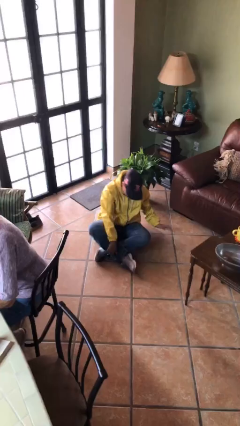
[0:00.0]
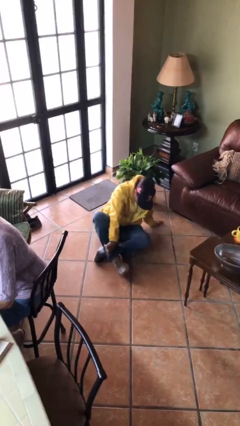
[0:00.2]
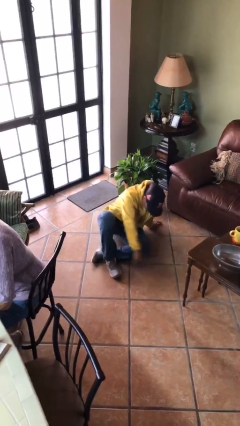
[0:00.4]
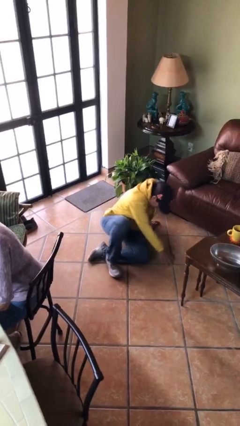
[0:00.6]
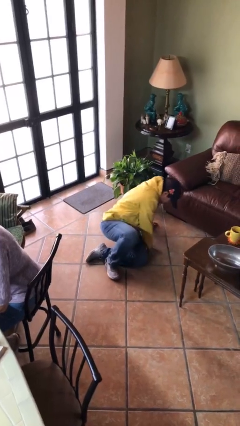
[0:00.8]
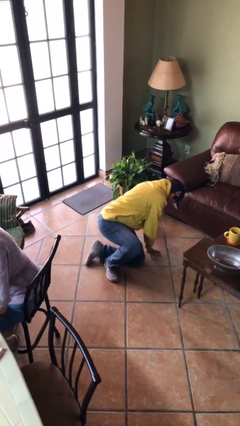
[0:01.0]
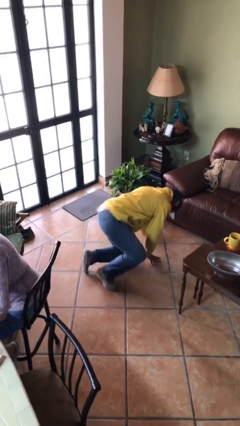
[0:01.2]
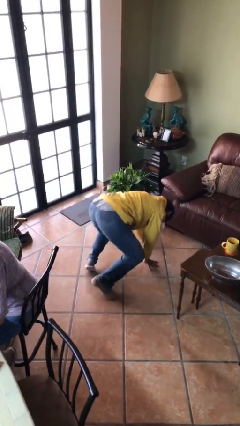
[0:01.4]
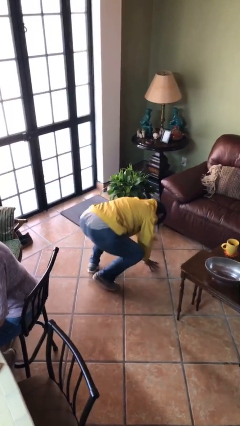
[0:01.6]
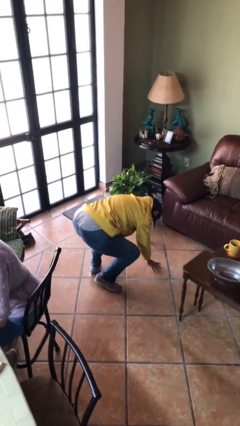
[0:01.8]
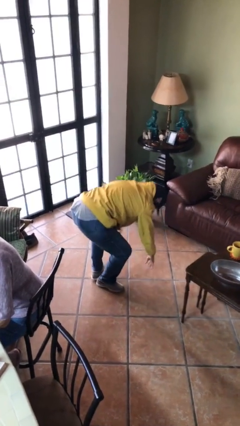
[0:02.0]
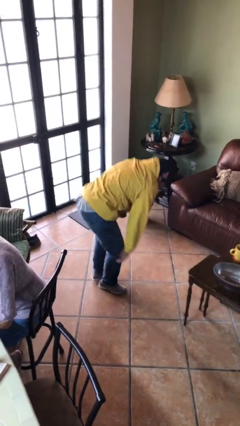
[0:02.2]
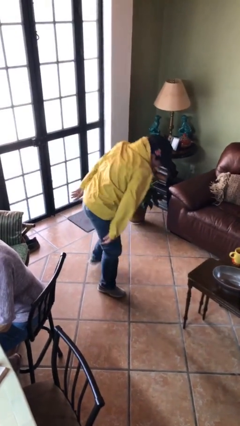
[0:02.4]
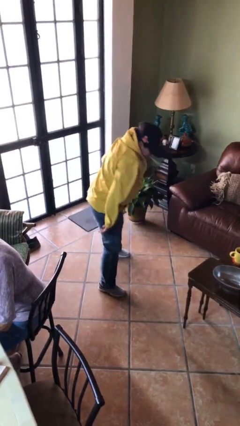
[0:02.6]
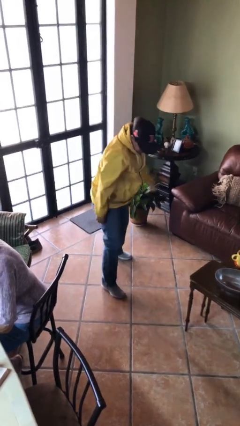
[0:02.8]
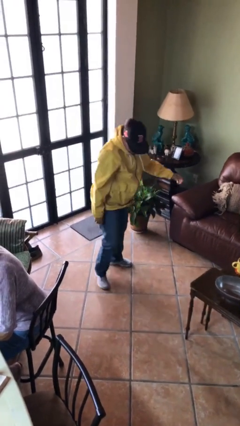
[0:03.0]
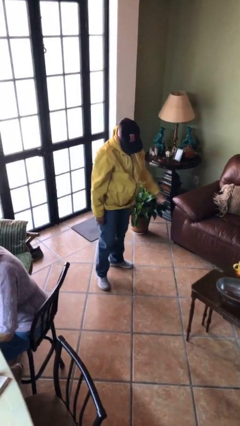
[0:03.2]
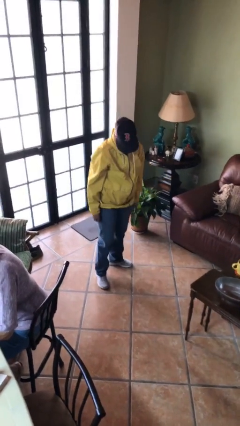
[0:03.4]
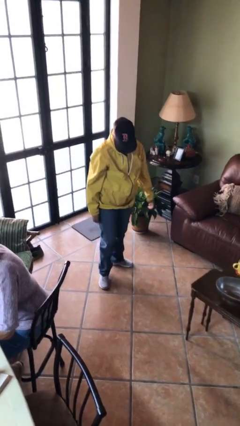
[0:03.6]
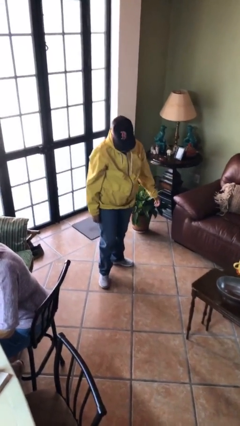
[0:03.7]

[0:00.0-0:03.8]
person stands up from floor

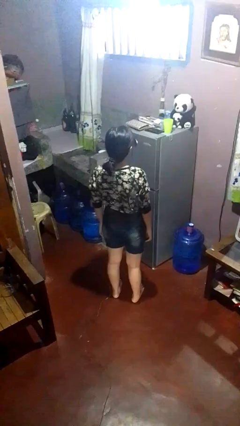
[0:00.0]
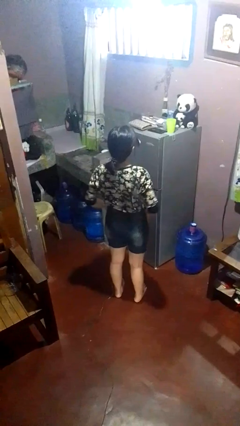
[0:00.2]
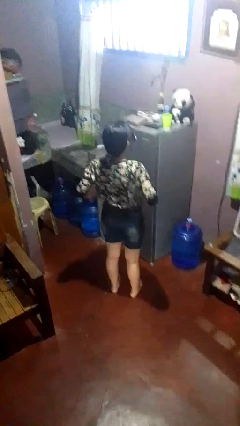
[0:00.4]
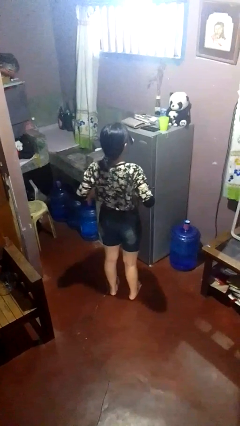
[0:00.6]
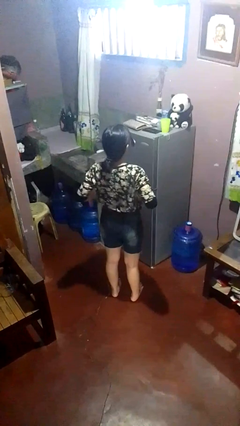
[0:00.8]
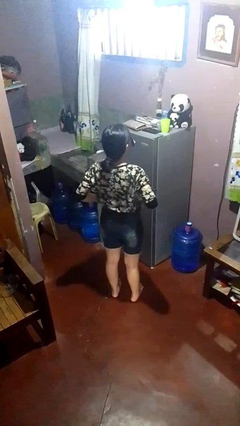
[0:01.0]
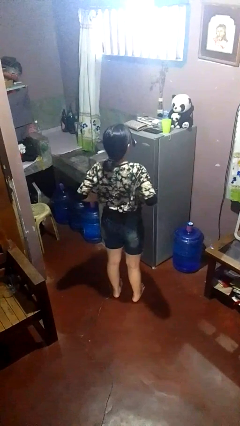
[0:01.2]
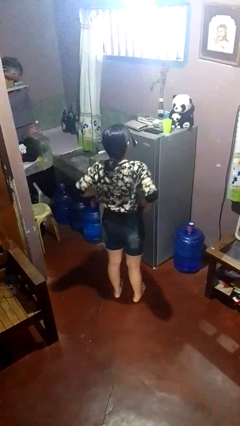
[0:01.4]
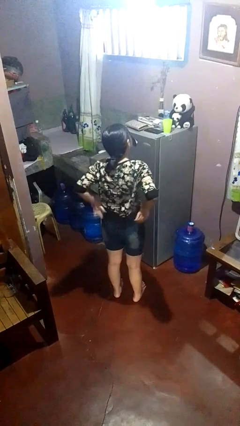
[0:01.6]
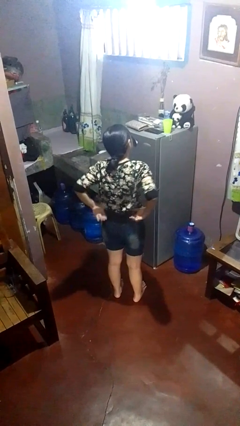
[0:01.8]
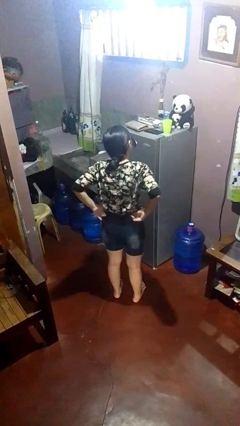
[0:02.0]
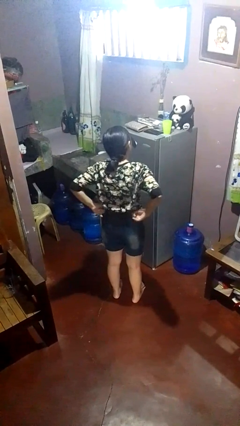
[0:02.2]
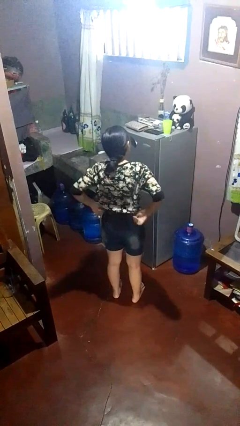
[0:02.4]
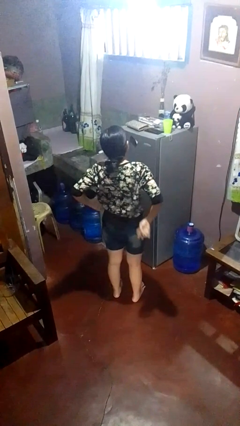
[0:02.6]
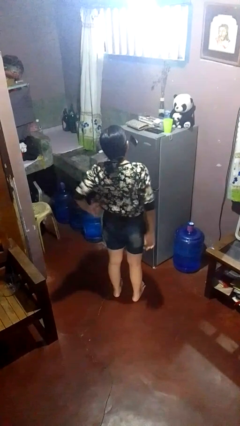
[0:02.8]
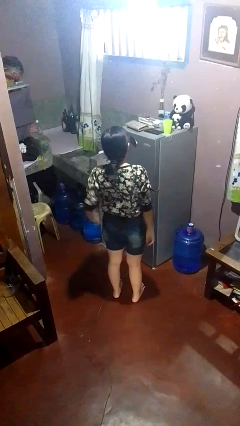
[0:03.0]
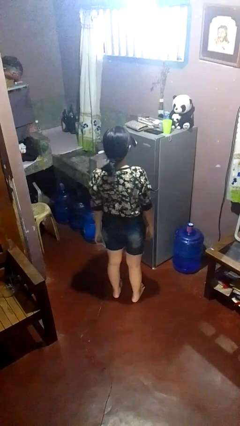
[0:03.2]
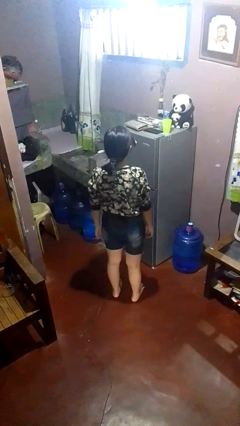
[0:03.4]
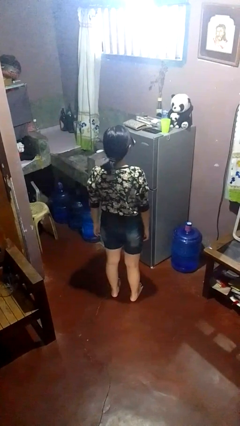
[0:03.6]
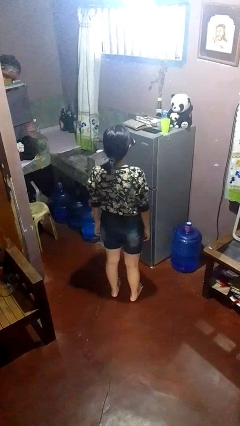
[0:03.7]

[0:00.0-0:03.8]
person hikes up pants

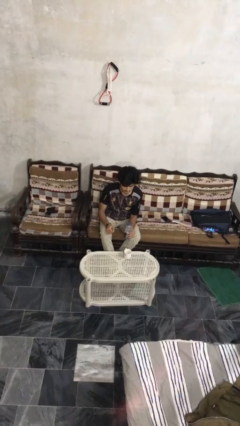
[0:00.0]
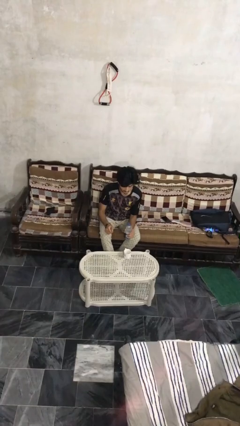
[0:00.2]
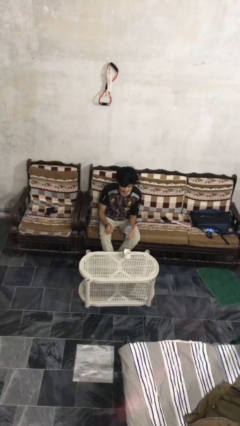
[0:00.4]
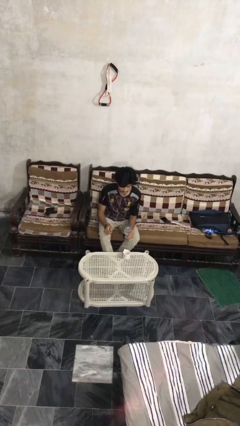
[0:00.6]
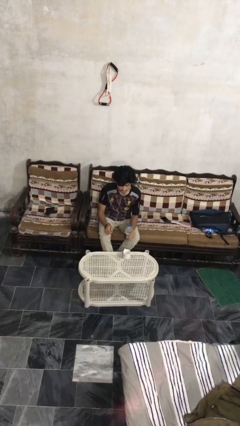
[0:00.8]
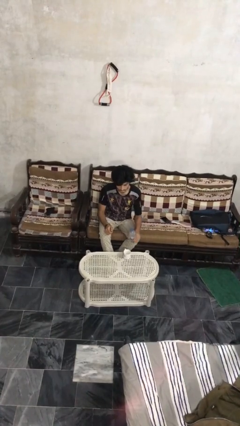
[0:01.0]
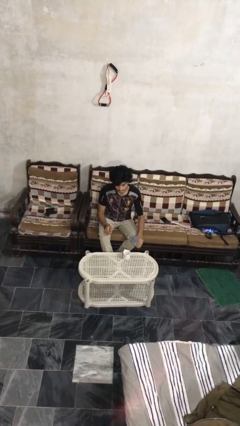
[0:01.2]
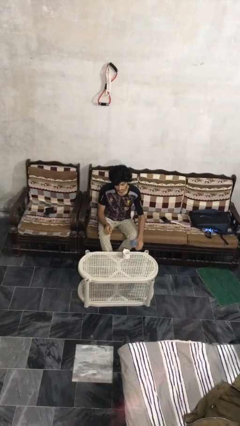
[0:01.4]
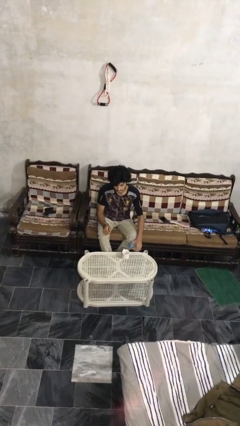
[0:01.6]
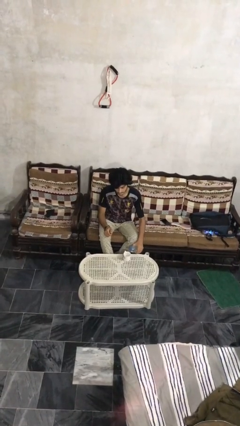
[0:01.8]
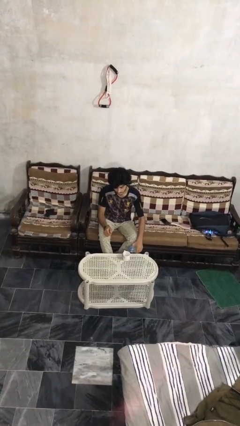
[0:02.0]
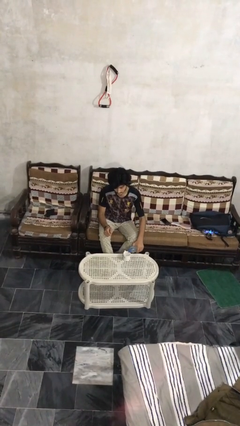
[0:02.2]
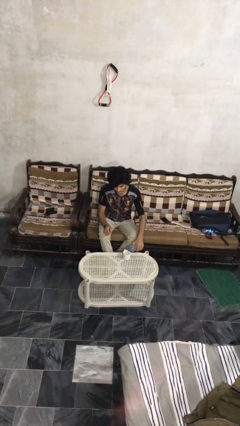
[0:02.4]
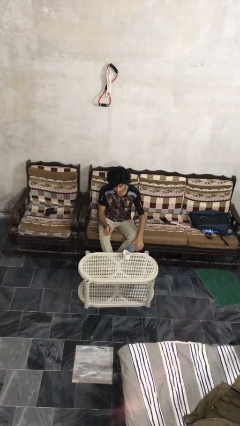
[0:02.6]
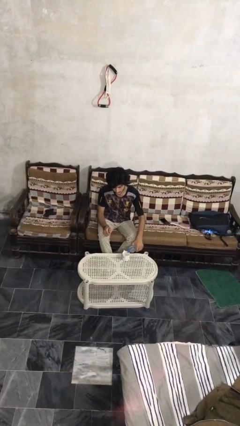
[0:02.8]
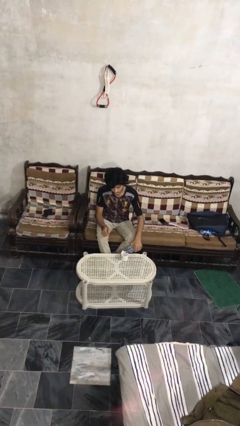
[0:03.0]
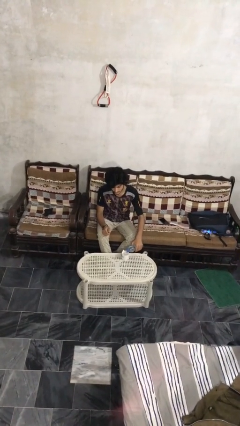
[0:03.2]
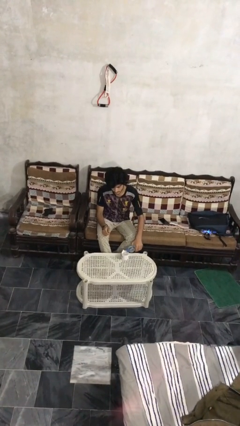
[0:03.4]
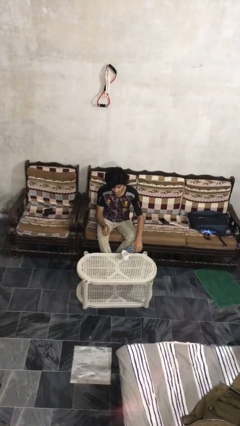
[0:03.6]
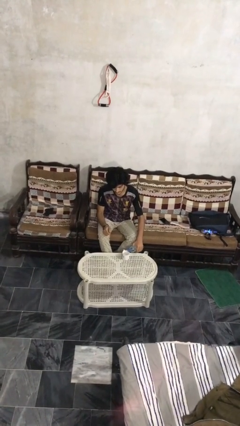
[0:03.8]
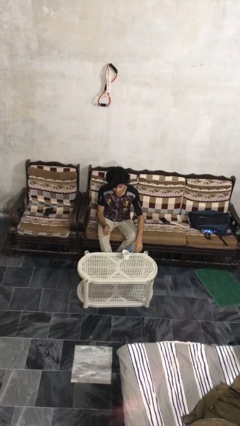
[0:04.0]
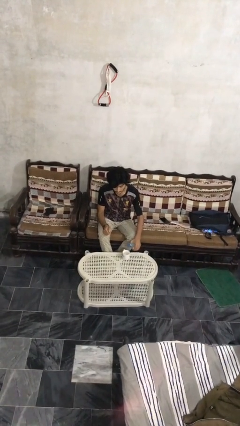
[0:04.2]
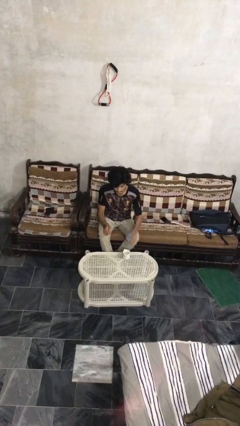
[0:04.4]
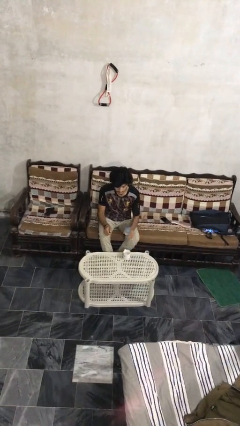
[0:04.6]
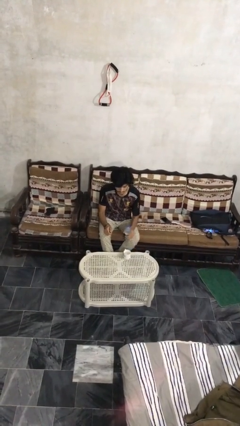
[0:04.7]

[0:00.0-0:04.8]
person pours liquid into cup

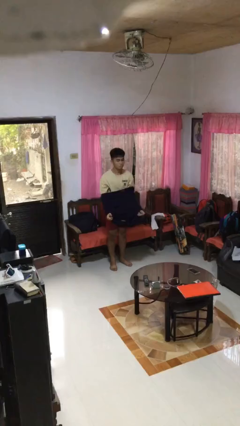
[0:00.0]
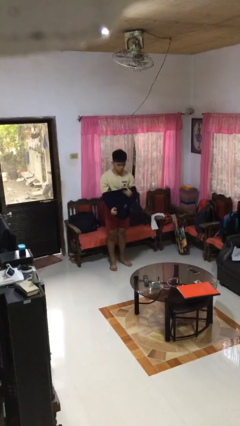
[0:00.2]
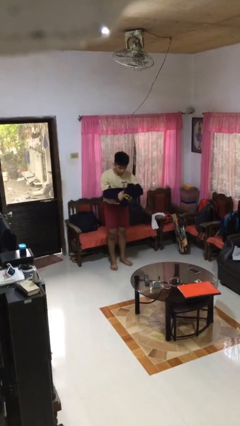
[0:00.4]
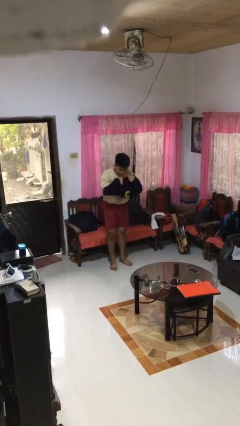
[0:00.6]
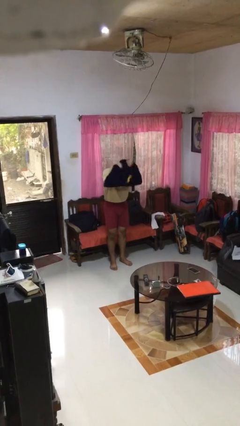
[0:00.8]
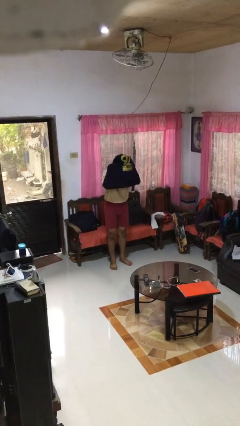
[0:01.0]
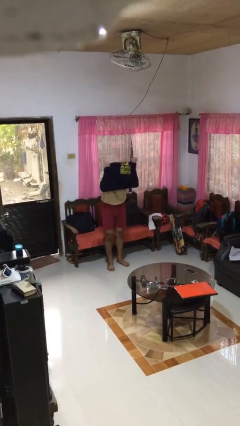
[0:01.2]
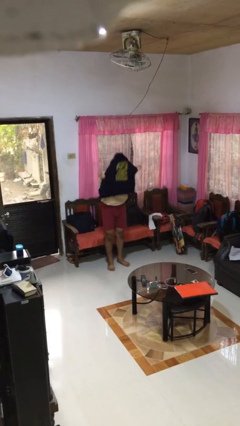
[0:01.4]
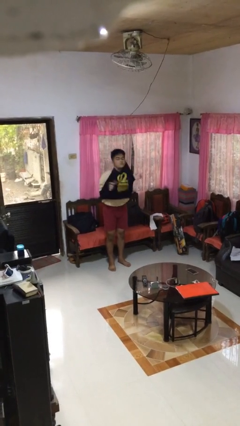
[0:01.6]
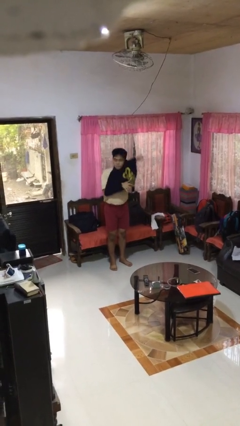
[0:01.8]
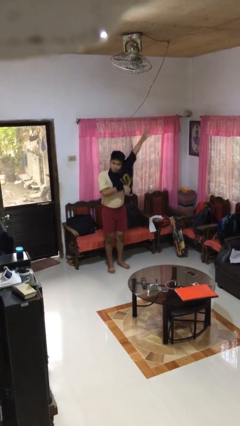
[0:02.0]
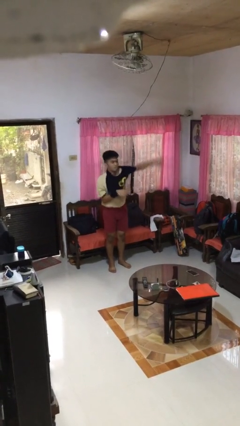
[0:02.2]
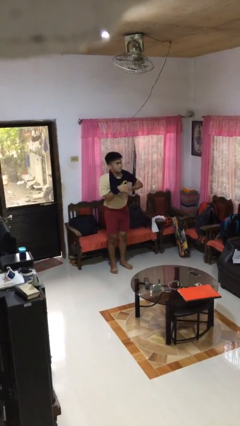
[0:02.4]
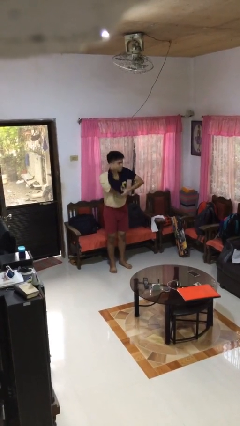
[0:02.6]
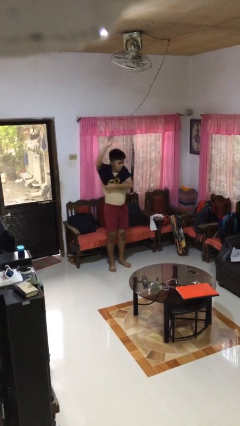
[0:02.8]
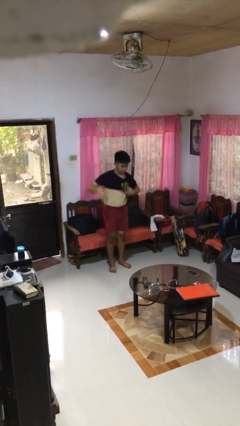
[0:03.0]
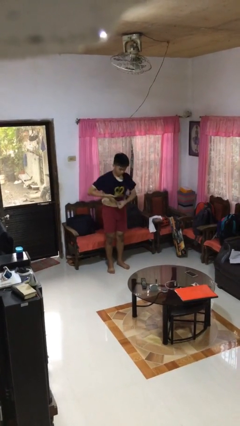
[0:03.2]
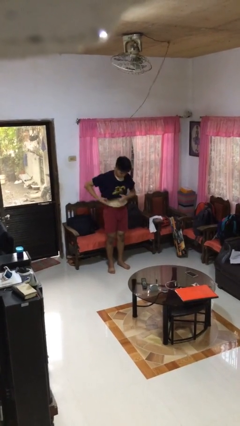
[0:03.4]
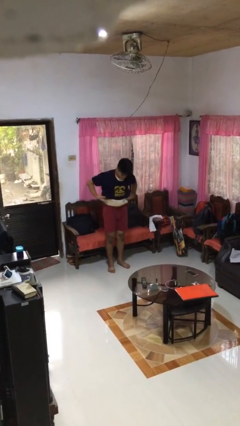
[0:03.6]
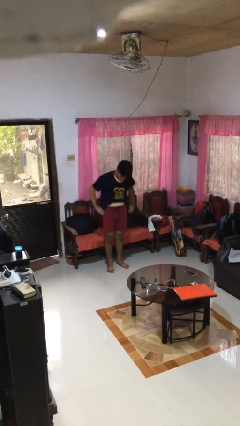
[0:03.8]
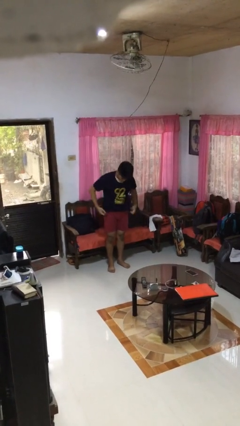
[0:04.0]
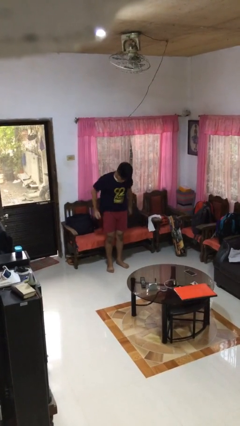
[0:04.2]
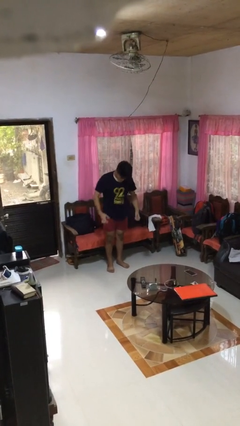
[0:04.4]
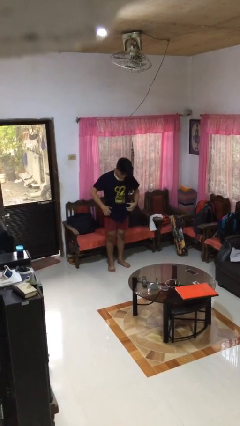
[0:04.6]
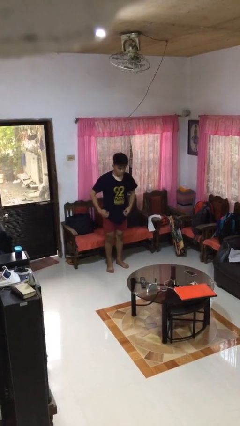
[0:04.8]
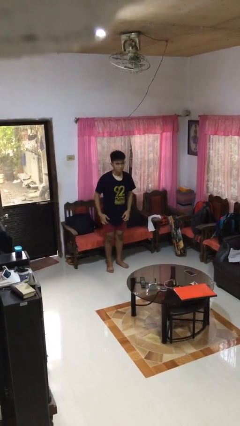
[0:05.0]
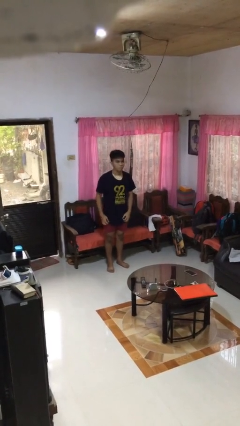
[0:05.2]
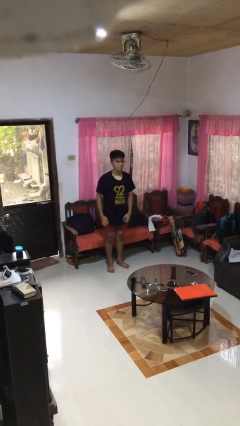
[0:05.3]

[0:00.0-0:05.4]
person puts on shirt
